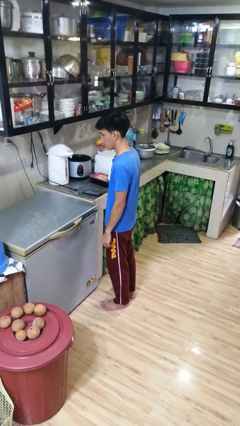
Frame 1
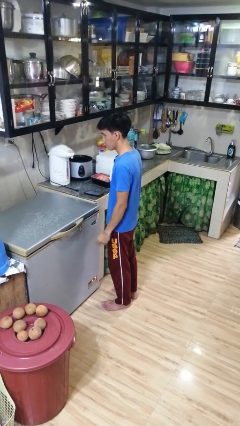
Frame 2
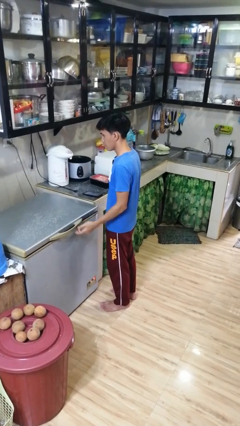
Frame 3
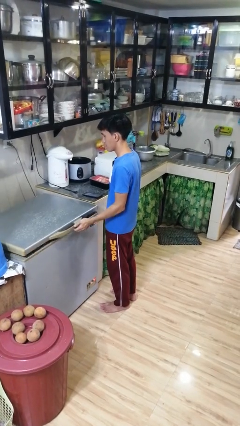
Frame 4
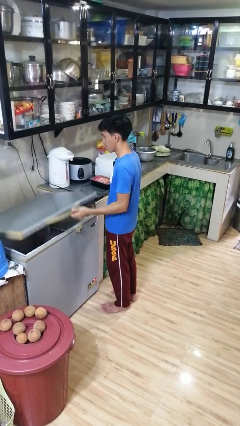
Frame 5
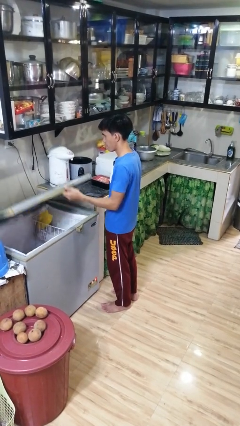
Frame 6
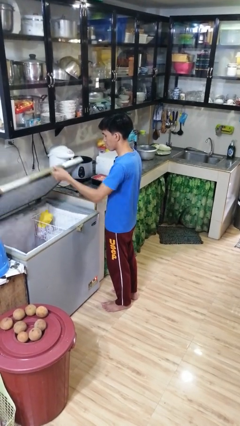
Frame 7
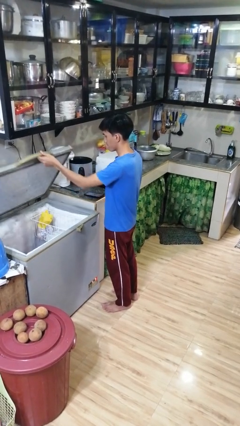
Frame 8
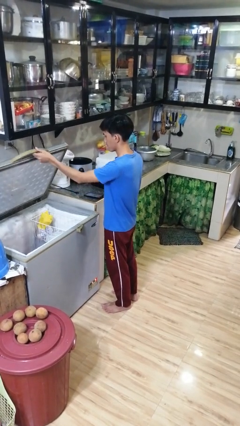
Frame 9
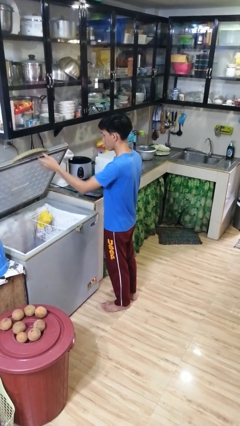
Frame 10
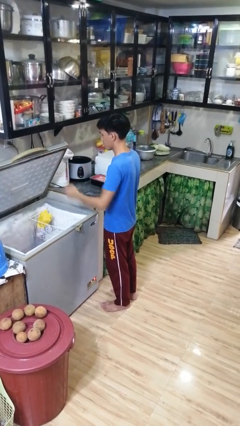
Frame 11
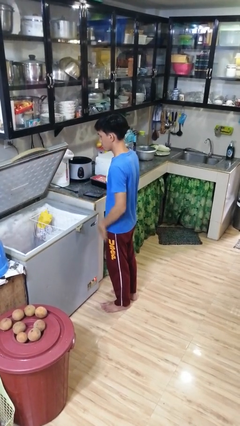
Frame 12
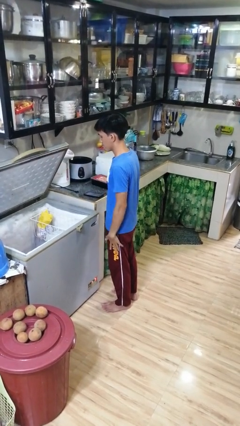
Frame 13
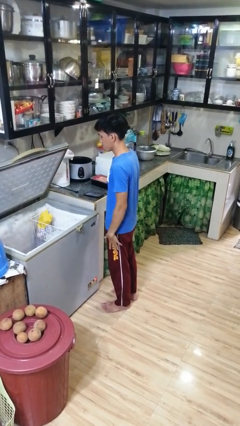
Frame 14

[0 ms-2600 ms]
person opens refrigerator

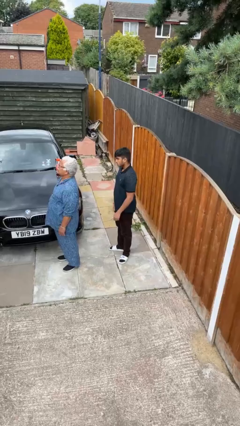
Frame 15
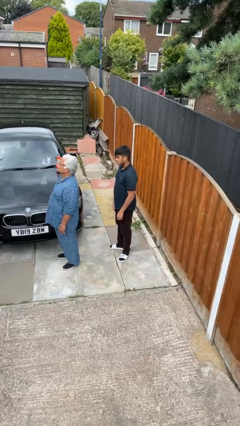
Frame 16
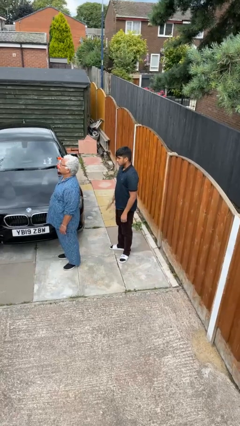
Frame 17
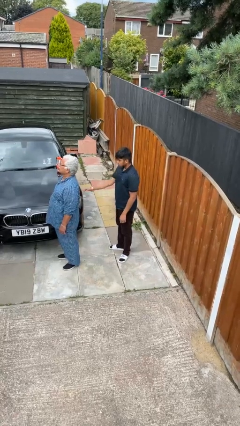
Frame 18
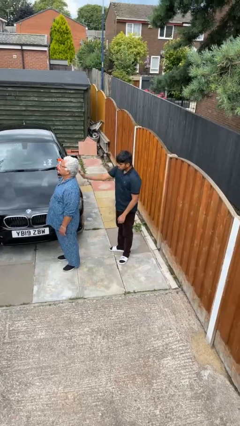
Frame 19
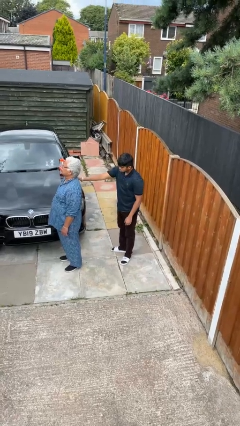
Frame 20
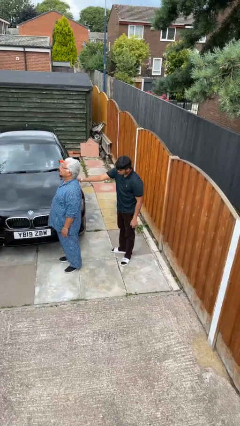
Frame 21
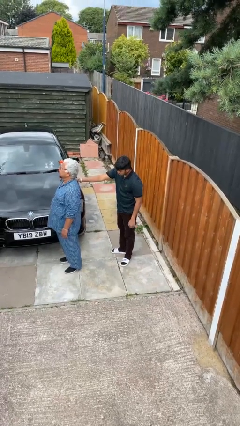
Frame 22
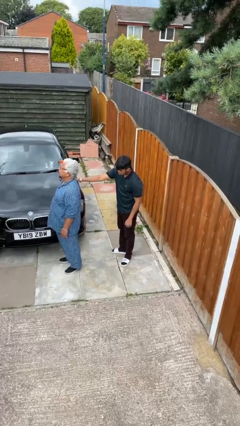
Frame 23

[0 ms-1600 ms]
person touches back of person

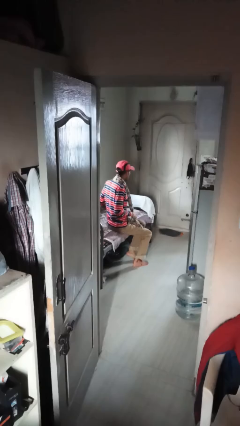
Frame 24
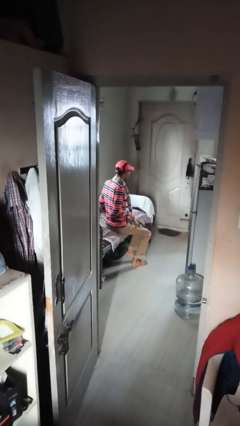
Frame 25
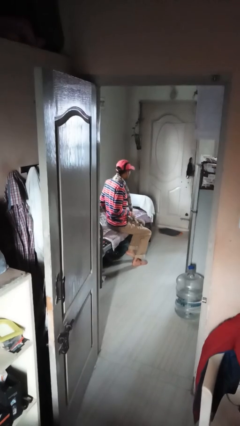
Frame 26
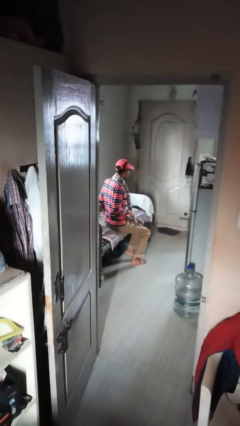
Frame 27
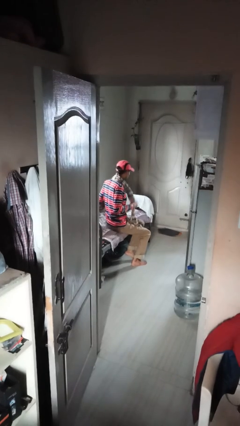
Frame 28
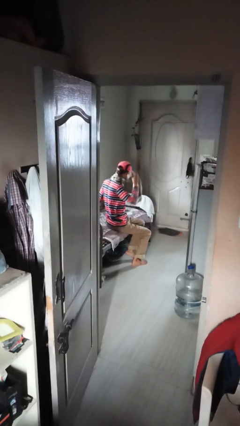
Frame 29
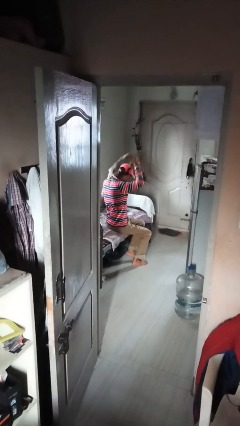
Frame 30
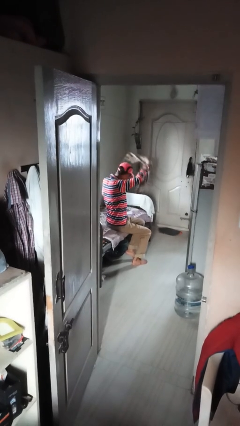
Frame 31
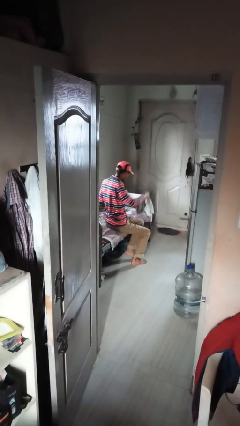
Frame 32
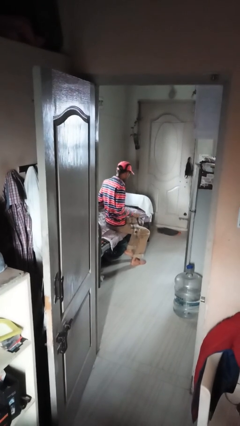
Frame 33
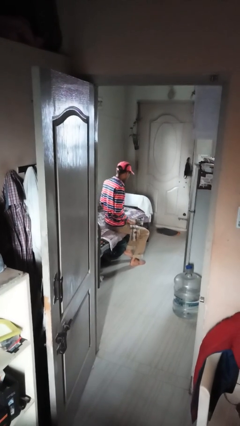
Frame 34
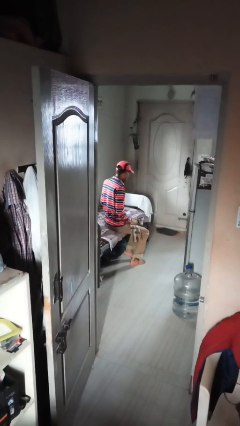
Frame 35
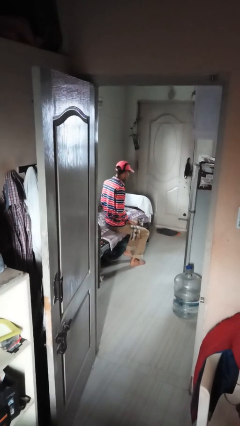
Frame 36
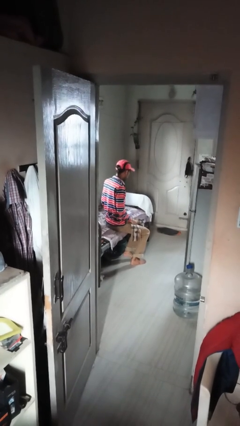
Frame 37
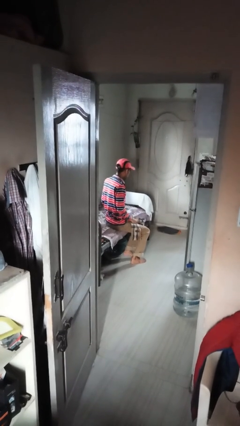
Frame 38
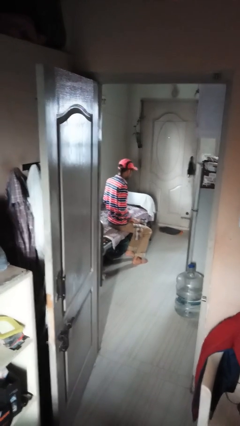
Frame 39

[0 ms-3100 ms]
person takes off scarf

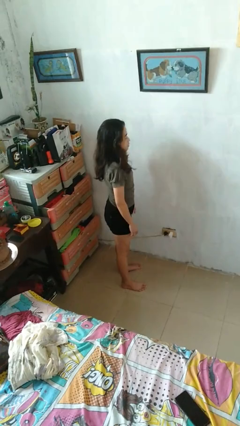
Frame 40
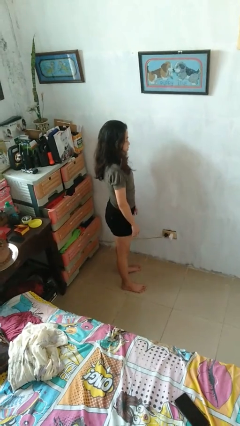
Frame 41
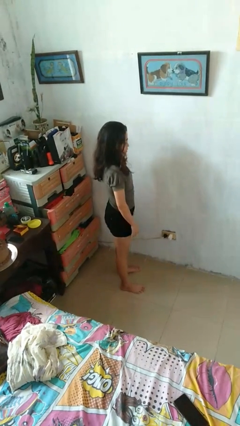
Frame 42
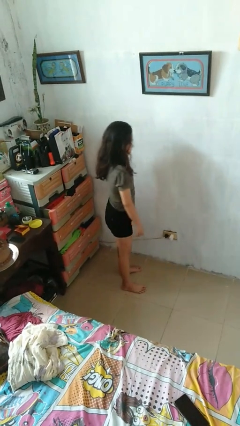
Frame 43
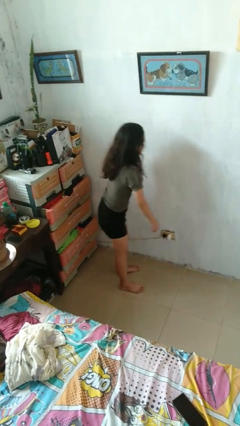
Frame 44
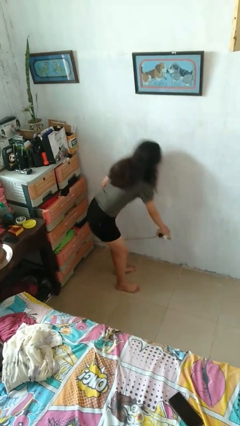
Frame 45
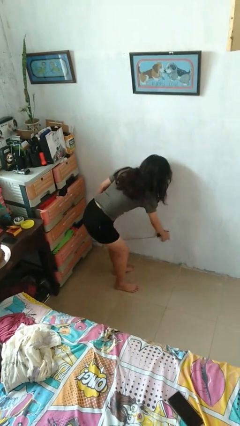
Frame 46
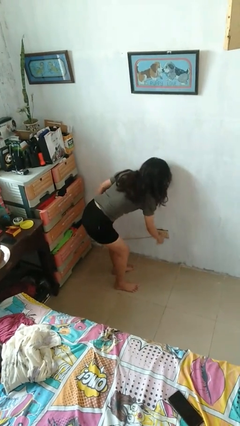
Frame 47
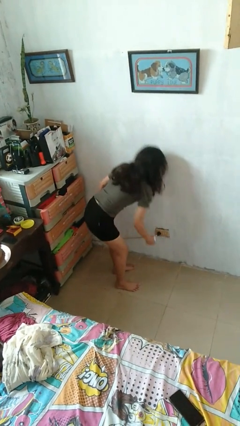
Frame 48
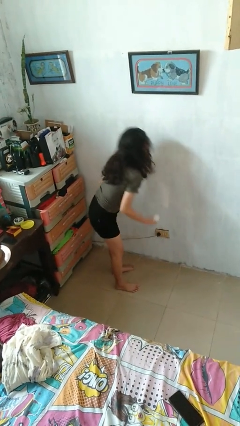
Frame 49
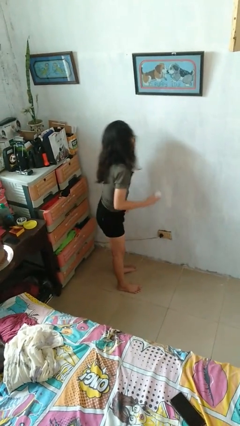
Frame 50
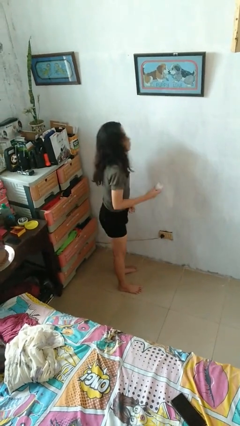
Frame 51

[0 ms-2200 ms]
person unplugs from electrical socket

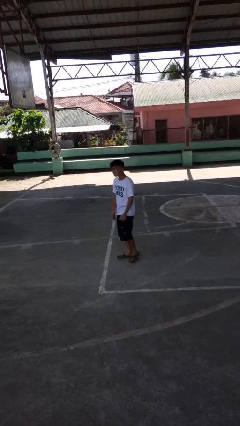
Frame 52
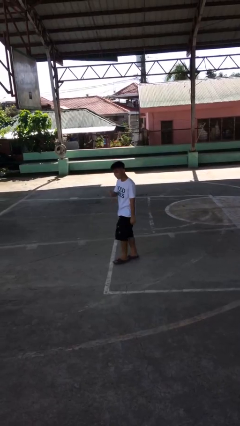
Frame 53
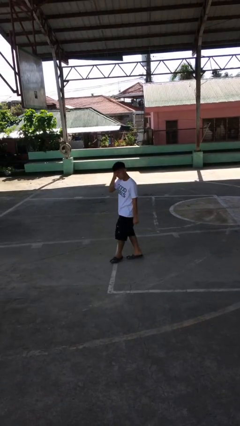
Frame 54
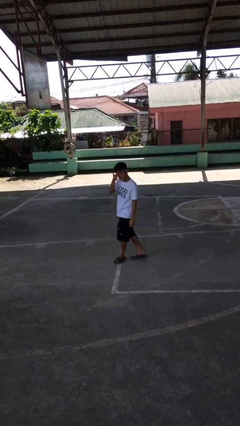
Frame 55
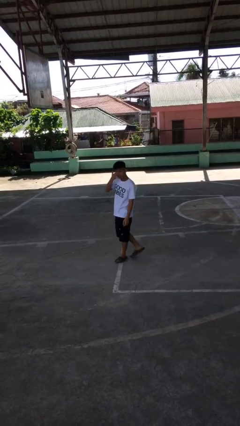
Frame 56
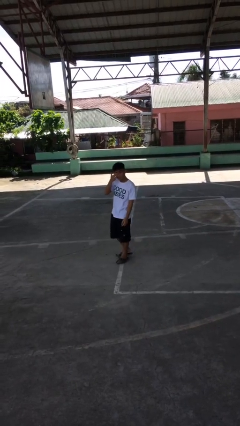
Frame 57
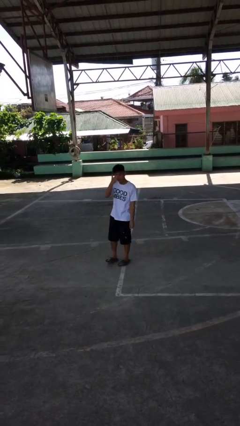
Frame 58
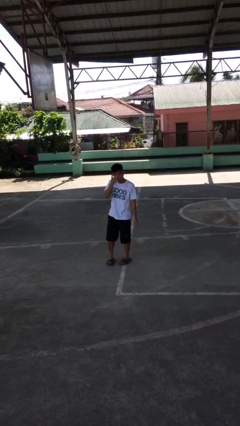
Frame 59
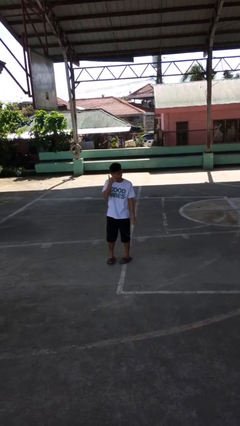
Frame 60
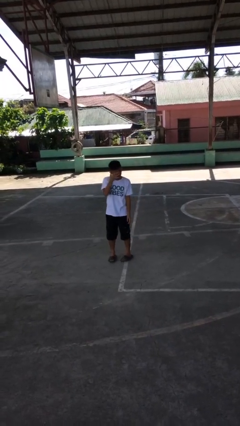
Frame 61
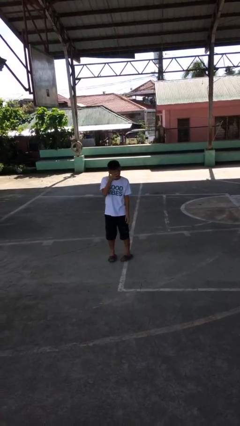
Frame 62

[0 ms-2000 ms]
person rubs eyes

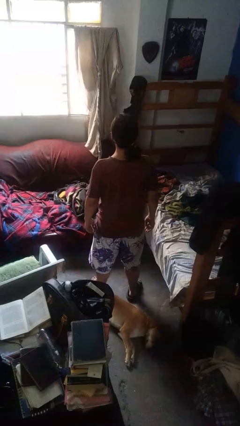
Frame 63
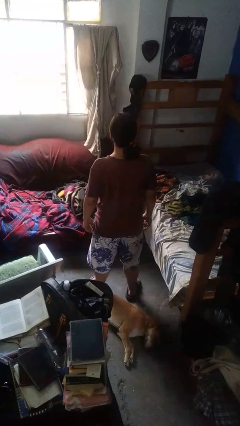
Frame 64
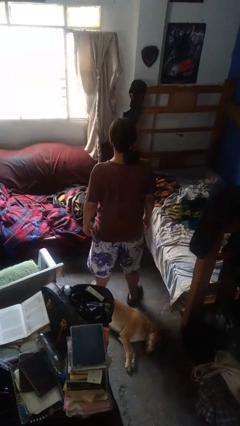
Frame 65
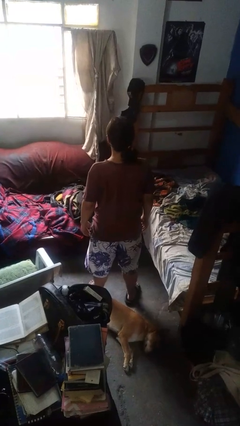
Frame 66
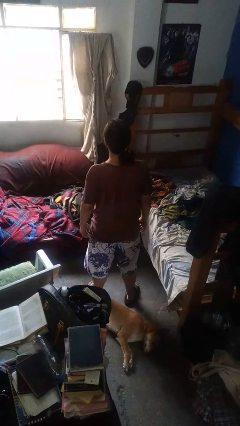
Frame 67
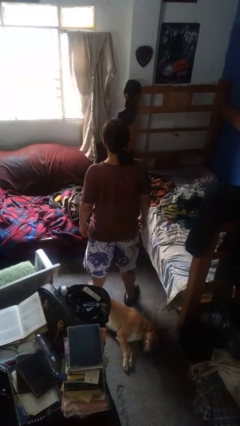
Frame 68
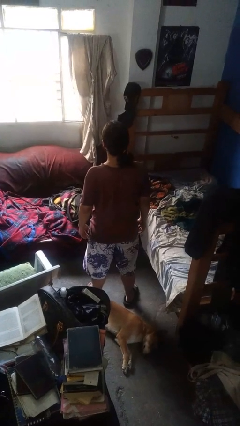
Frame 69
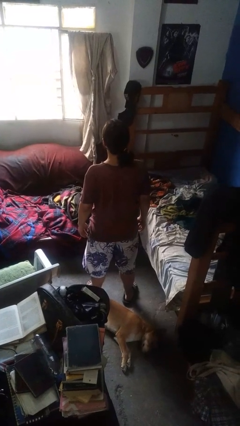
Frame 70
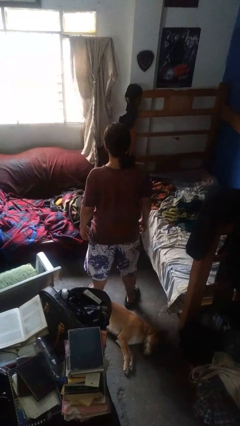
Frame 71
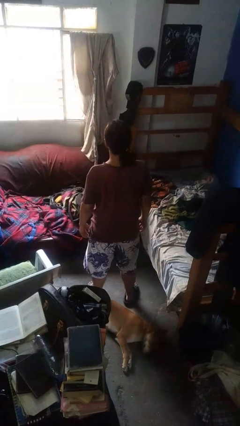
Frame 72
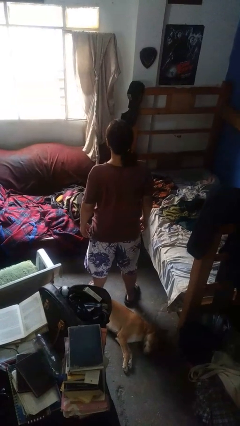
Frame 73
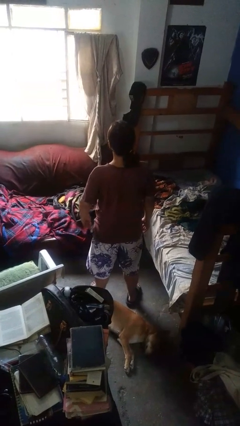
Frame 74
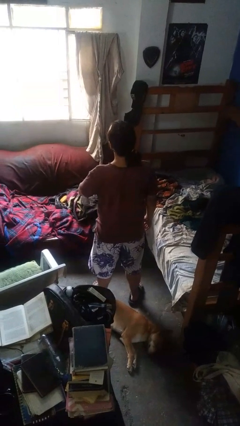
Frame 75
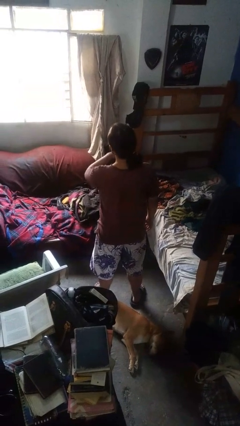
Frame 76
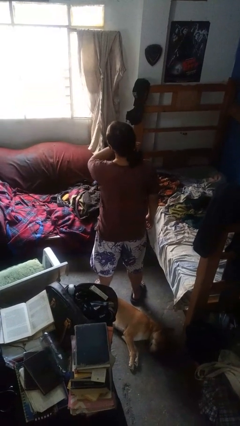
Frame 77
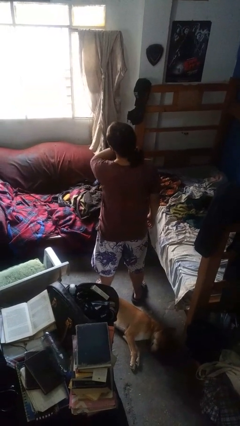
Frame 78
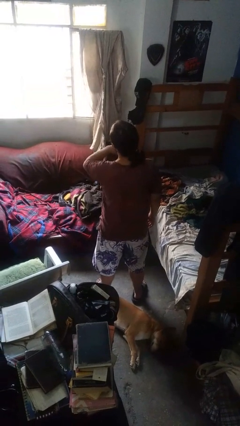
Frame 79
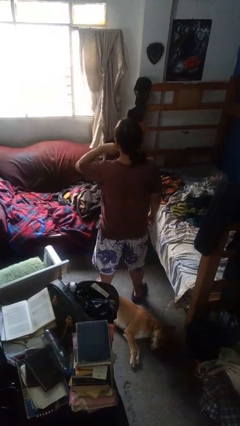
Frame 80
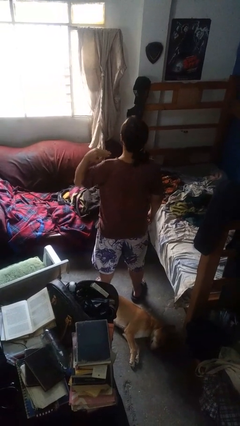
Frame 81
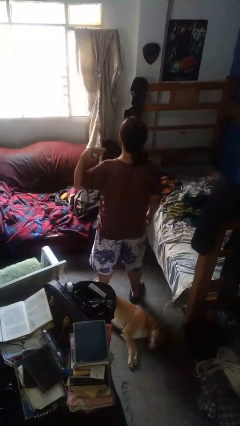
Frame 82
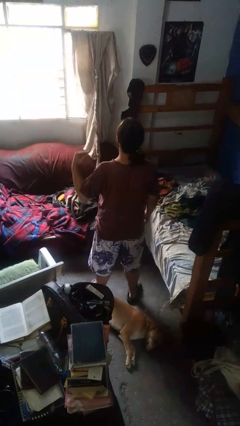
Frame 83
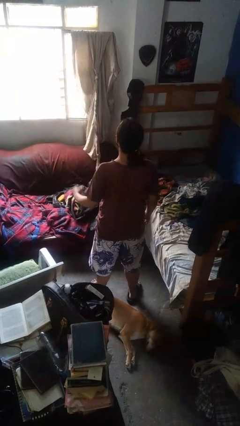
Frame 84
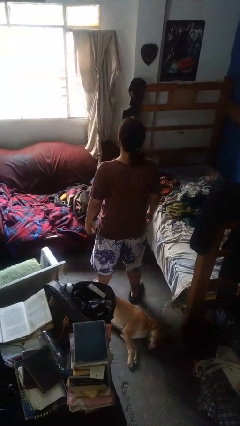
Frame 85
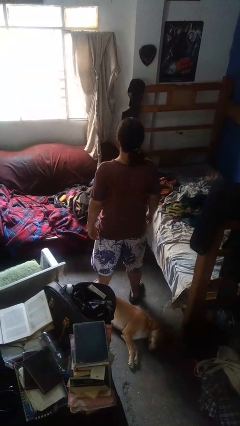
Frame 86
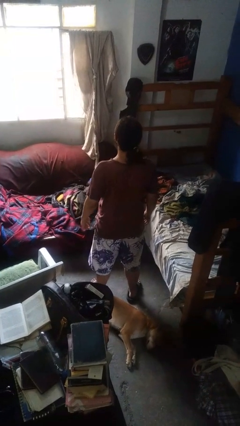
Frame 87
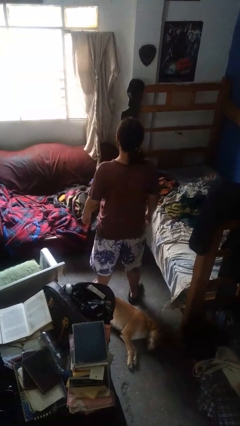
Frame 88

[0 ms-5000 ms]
person gestures watch closely

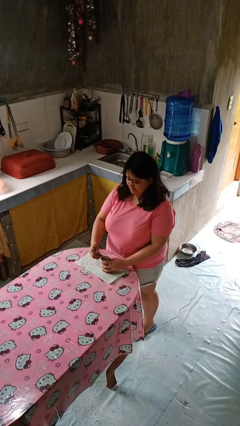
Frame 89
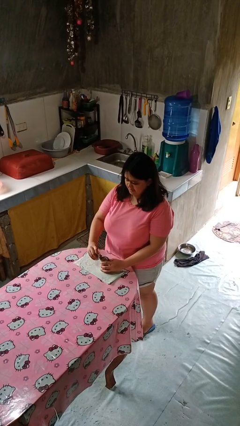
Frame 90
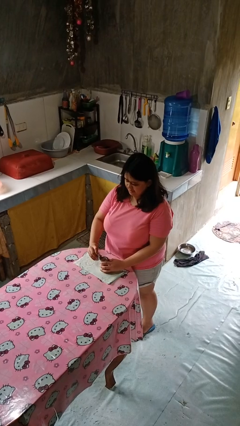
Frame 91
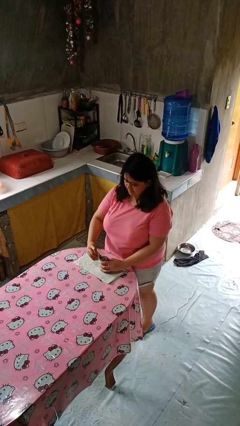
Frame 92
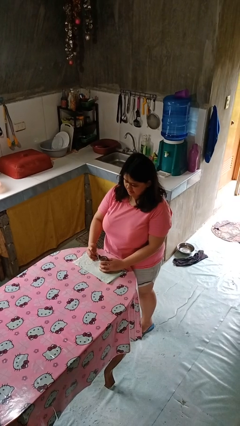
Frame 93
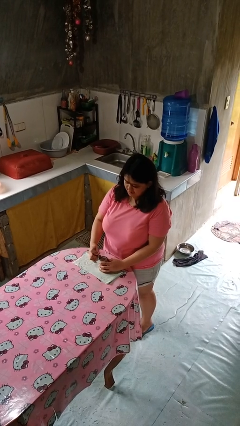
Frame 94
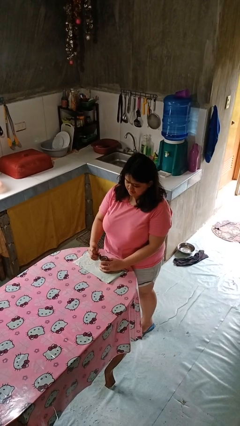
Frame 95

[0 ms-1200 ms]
person opens can with can opener
